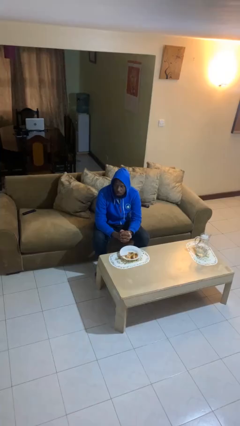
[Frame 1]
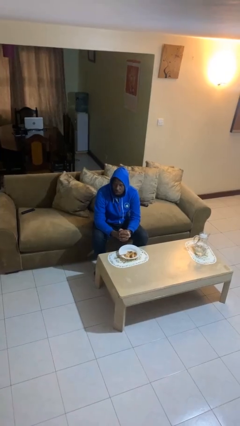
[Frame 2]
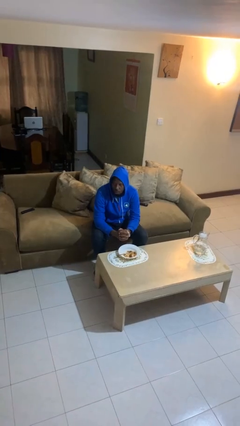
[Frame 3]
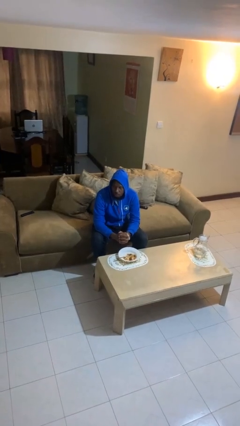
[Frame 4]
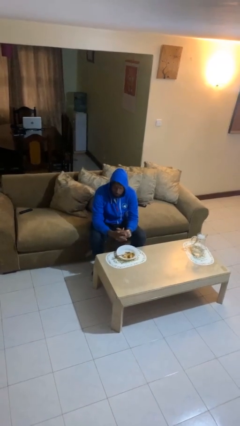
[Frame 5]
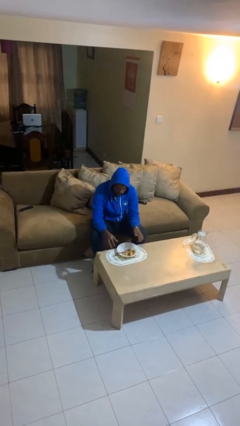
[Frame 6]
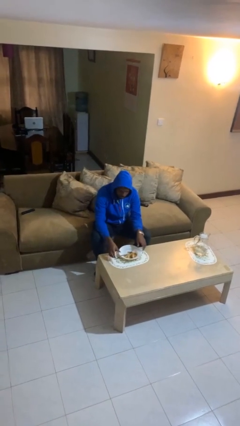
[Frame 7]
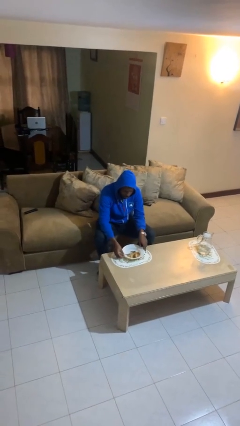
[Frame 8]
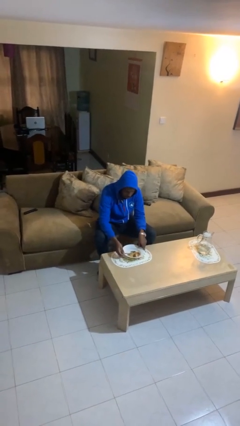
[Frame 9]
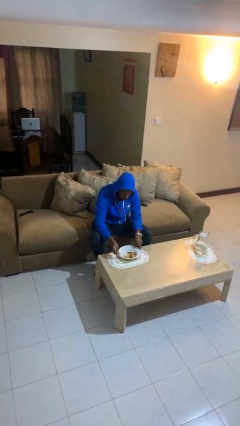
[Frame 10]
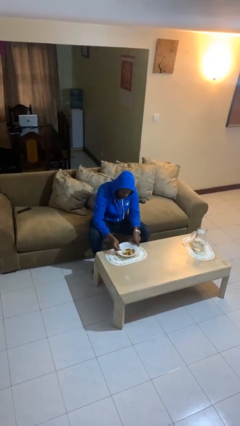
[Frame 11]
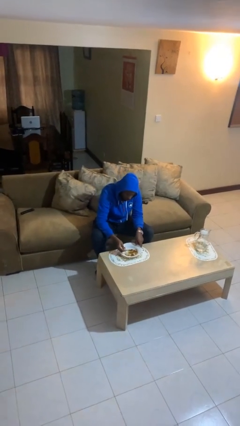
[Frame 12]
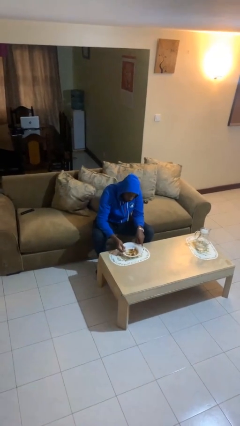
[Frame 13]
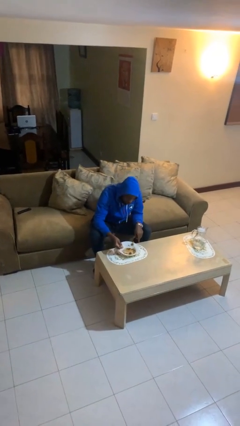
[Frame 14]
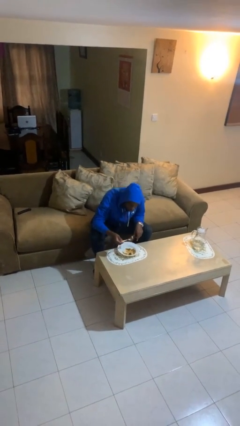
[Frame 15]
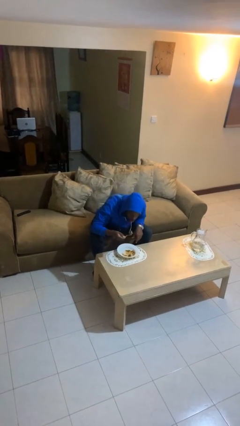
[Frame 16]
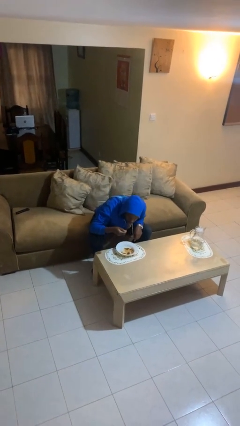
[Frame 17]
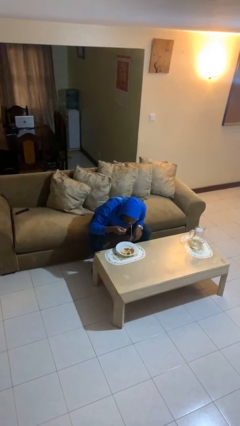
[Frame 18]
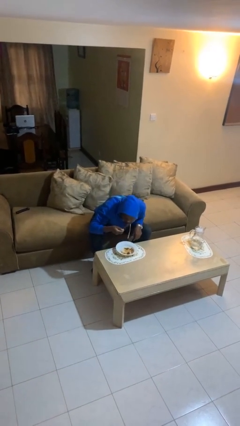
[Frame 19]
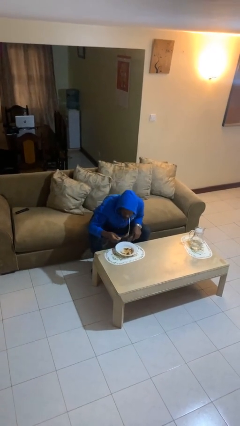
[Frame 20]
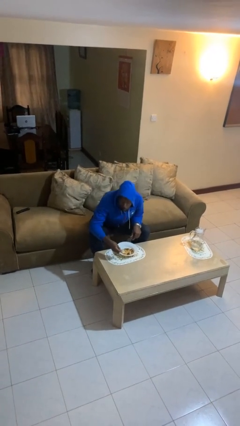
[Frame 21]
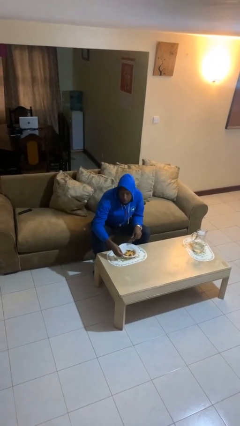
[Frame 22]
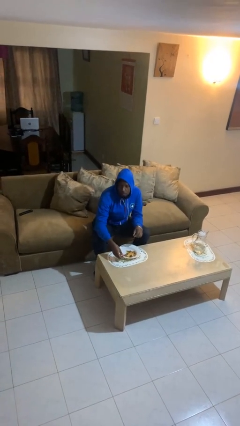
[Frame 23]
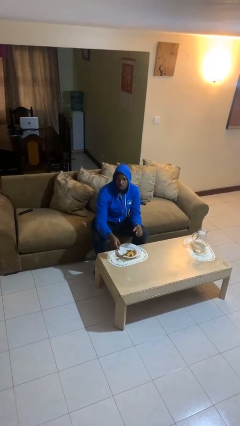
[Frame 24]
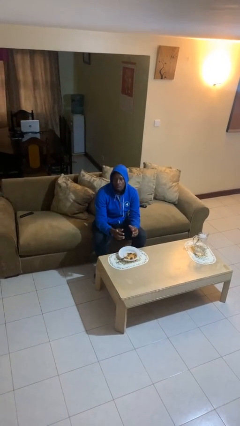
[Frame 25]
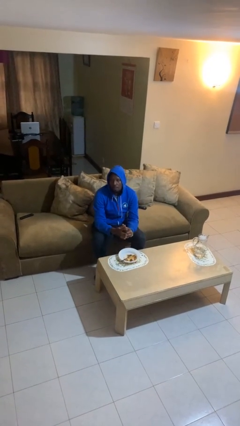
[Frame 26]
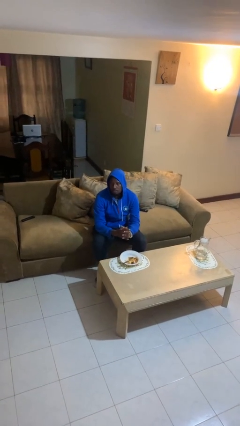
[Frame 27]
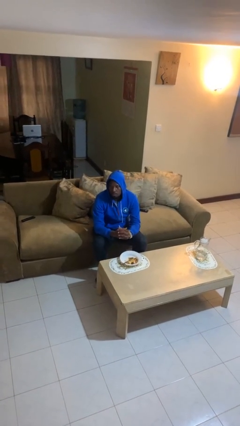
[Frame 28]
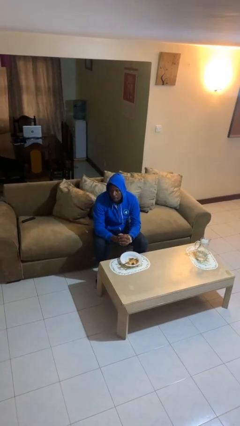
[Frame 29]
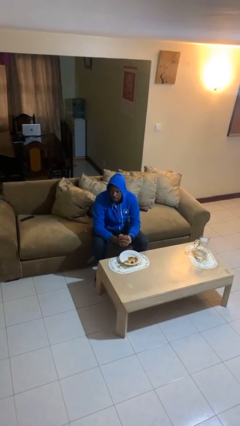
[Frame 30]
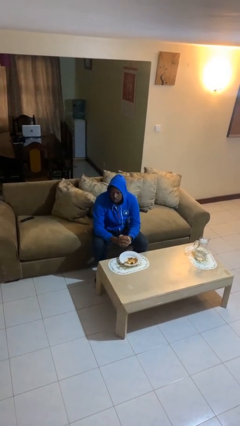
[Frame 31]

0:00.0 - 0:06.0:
person eats with utensil

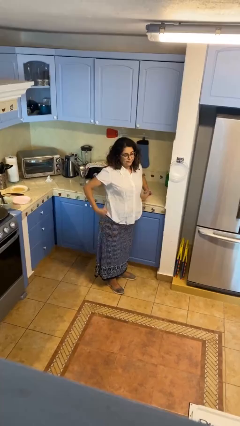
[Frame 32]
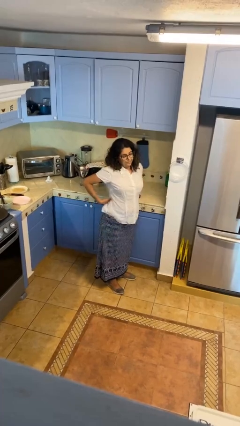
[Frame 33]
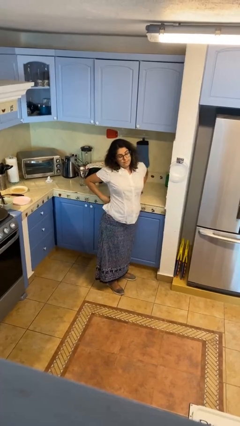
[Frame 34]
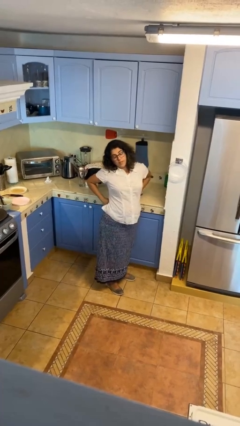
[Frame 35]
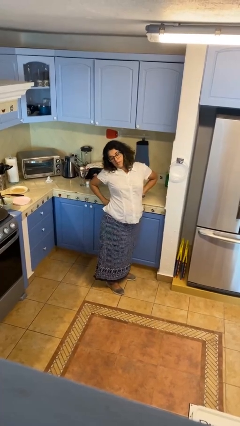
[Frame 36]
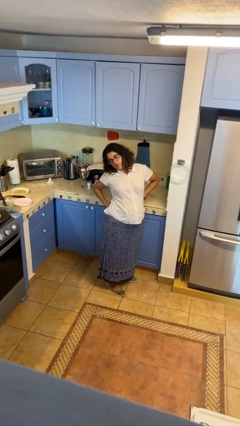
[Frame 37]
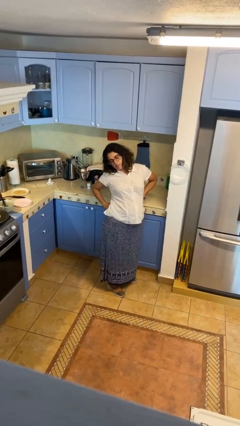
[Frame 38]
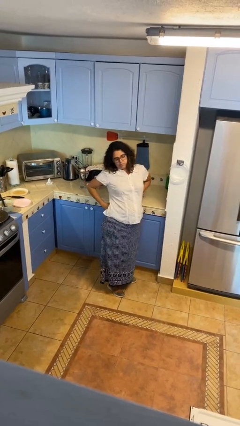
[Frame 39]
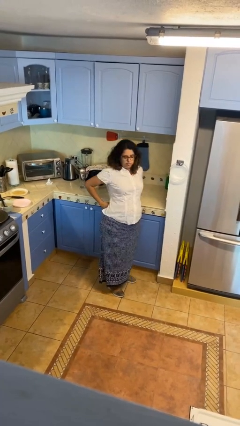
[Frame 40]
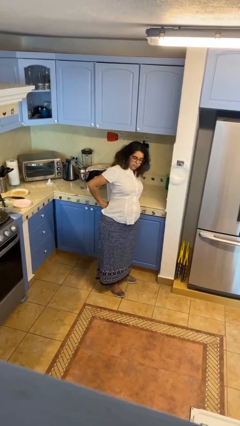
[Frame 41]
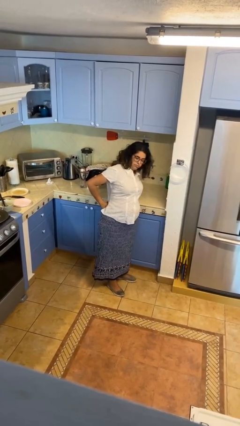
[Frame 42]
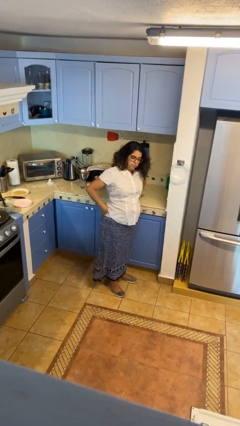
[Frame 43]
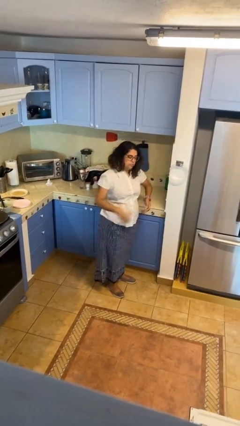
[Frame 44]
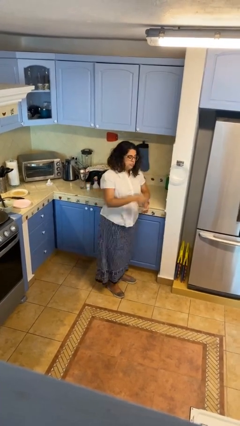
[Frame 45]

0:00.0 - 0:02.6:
person stretches back

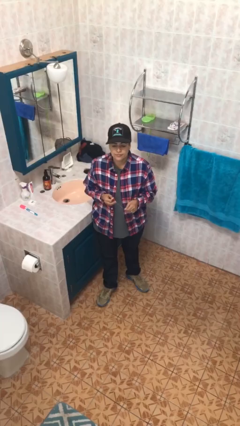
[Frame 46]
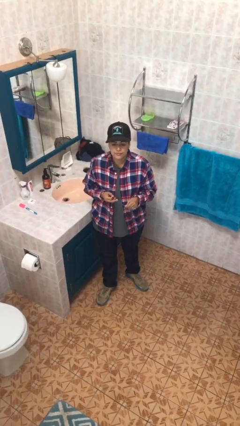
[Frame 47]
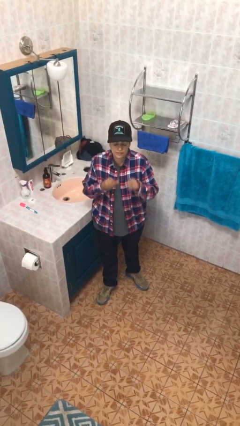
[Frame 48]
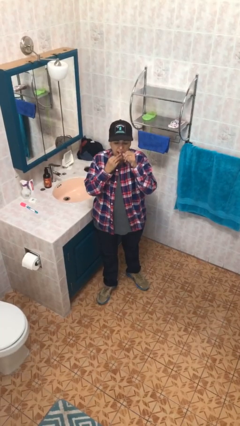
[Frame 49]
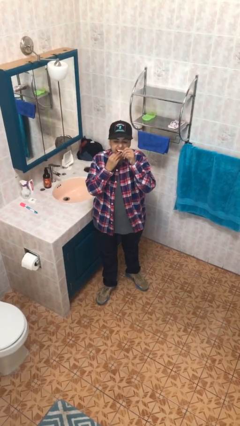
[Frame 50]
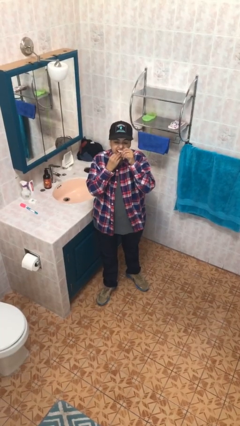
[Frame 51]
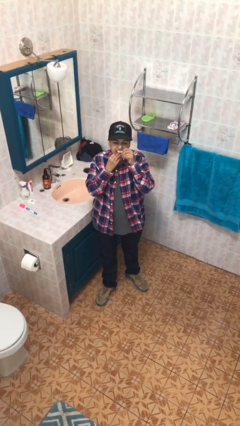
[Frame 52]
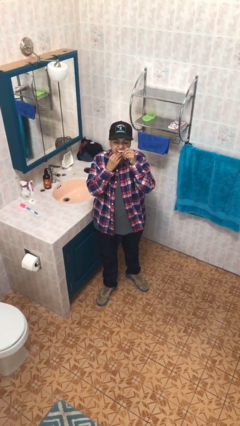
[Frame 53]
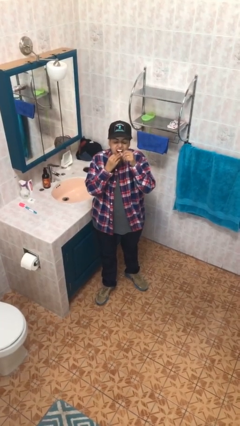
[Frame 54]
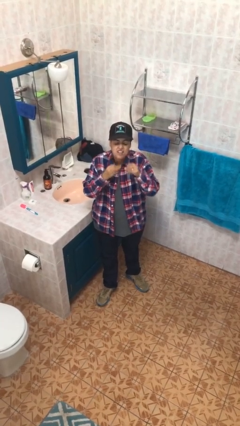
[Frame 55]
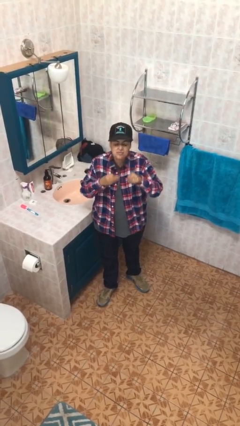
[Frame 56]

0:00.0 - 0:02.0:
person flosses

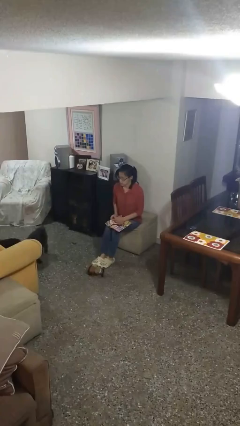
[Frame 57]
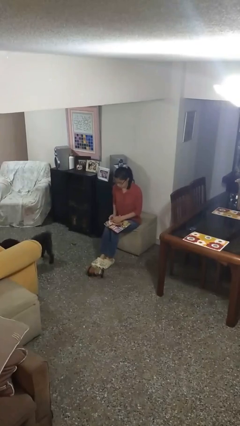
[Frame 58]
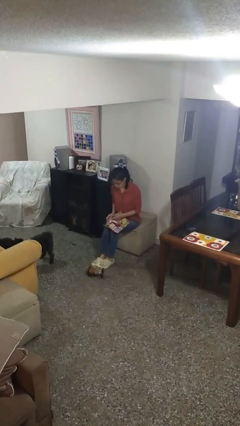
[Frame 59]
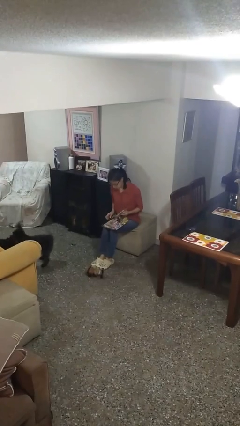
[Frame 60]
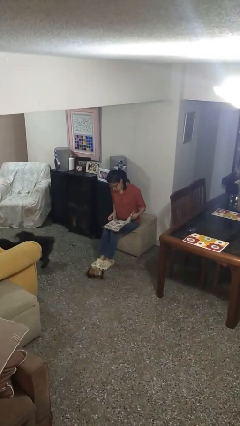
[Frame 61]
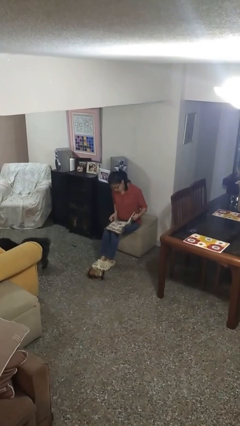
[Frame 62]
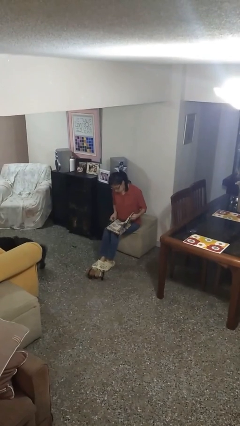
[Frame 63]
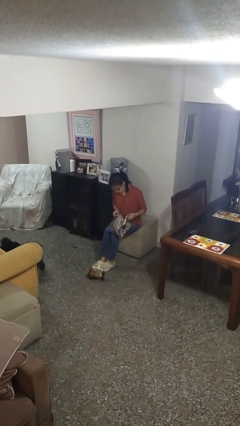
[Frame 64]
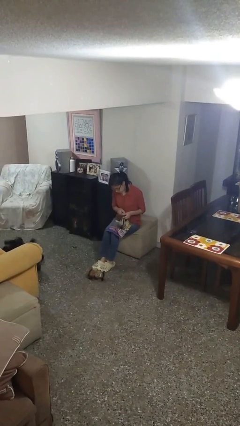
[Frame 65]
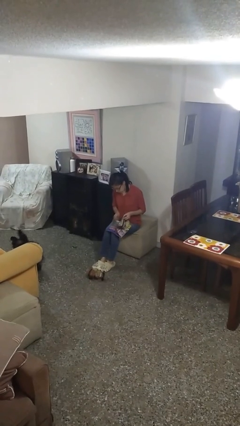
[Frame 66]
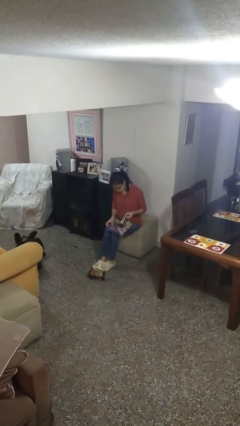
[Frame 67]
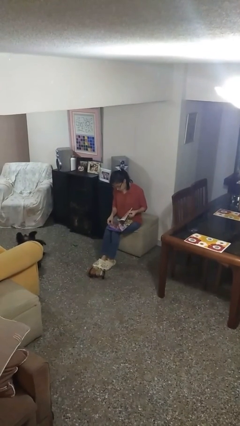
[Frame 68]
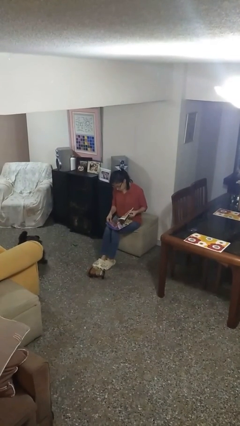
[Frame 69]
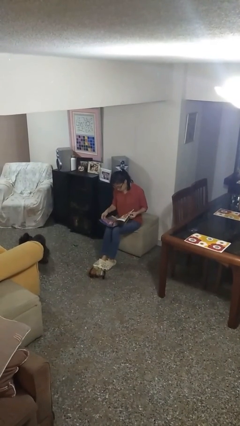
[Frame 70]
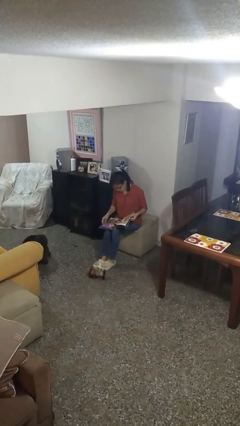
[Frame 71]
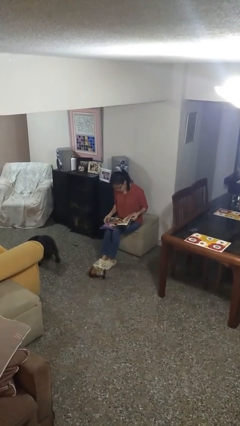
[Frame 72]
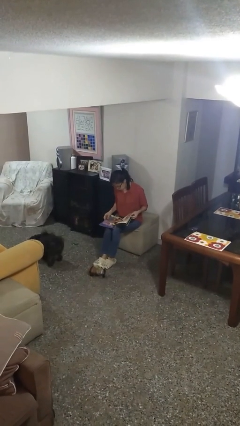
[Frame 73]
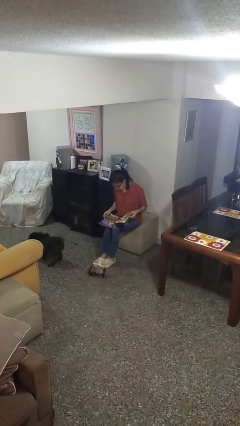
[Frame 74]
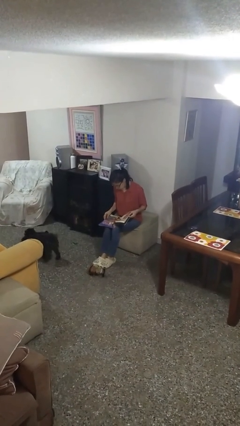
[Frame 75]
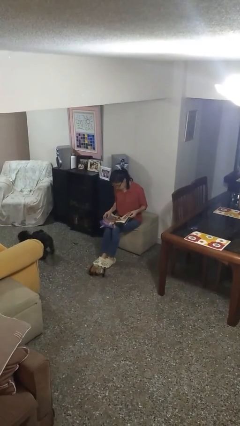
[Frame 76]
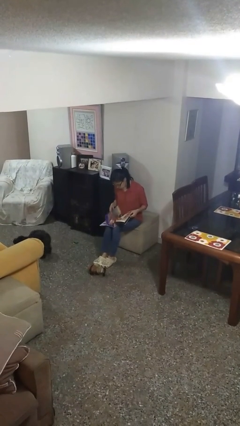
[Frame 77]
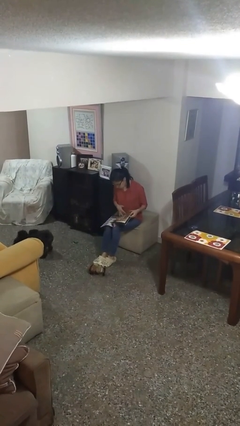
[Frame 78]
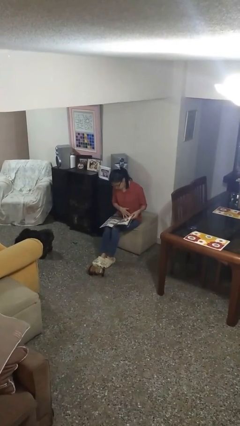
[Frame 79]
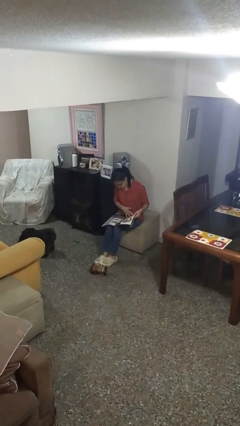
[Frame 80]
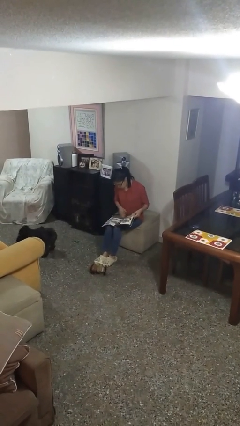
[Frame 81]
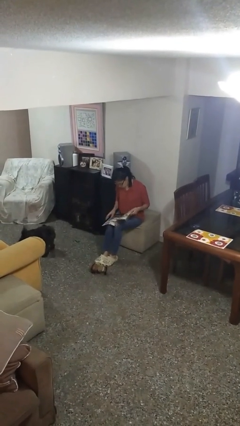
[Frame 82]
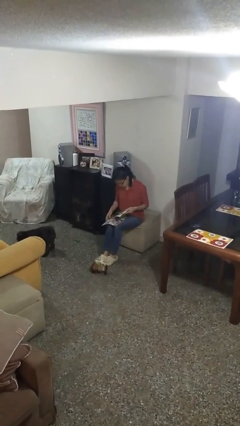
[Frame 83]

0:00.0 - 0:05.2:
person reads magazine

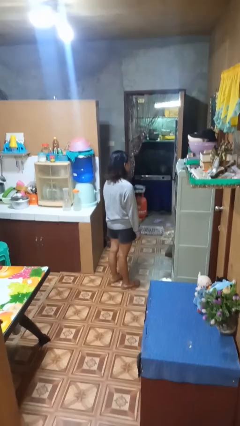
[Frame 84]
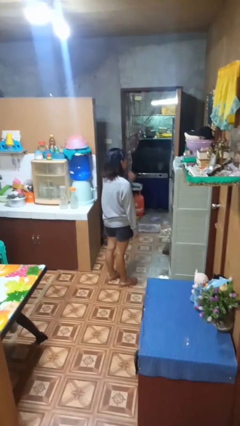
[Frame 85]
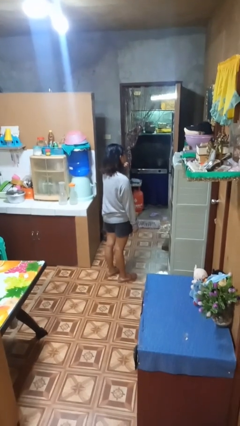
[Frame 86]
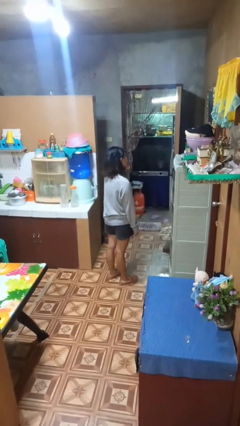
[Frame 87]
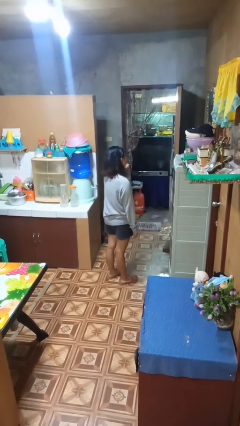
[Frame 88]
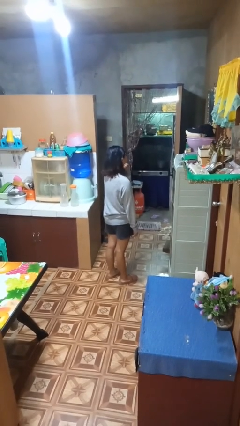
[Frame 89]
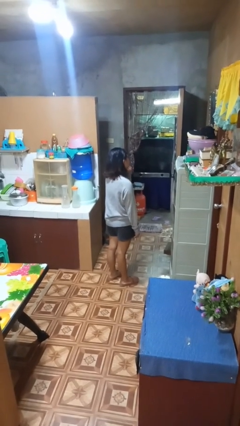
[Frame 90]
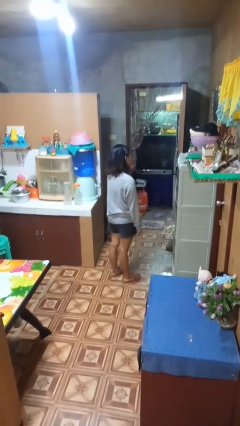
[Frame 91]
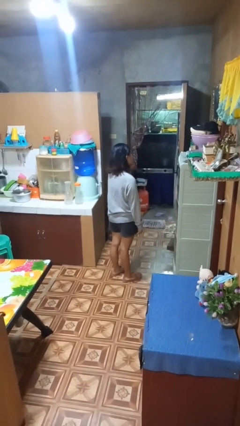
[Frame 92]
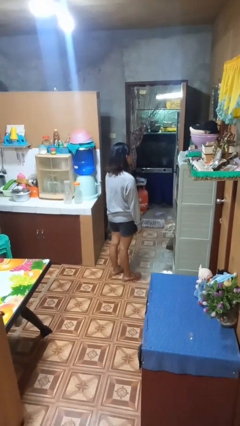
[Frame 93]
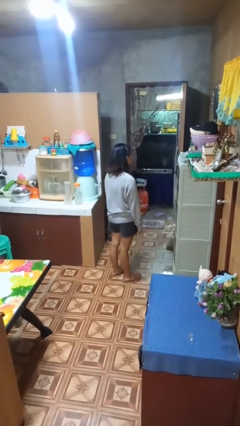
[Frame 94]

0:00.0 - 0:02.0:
person strokes chin
